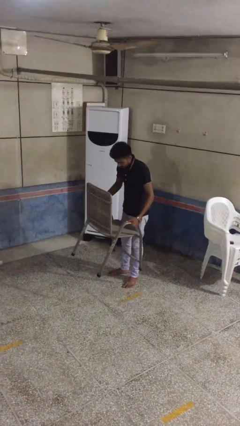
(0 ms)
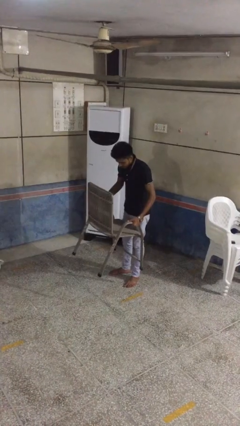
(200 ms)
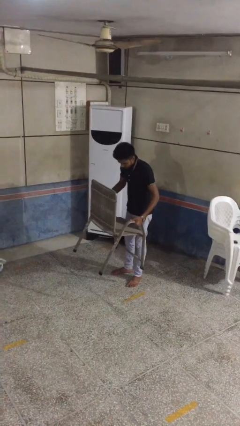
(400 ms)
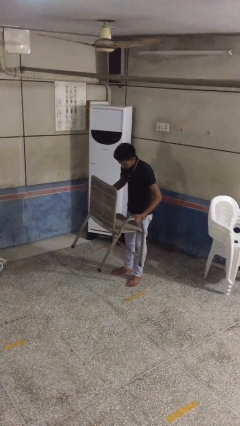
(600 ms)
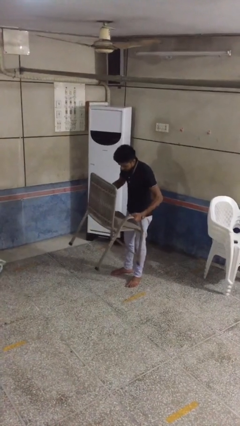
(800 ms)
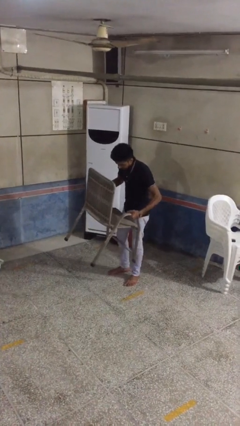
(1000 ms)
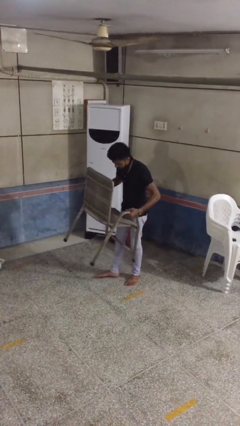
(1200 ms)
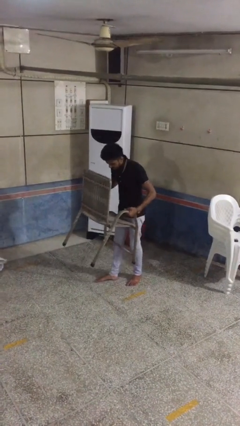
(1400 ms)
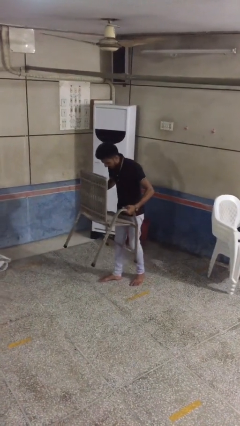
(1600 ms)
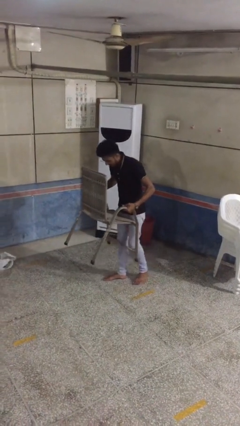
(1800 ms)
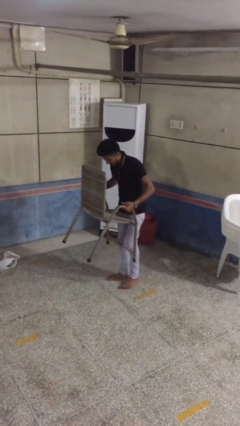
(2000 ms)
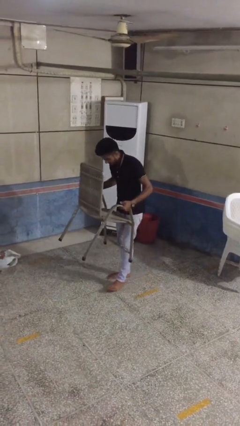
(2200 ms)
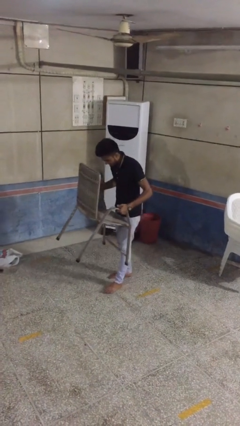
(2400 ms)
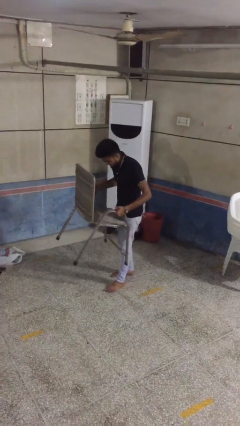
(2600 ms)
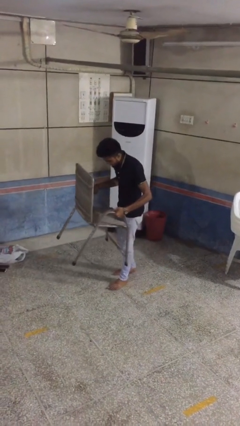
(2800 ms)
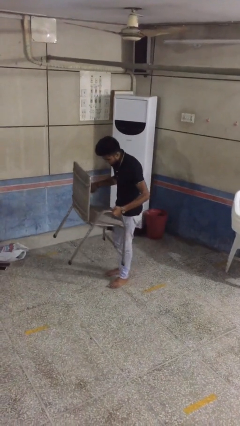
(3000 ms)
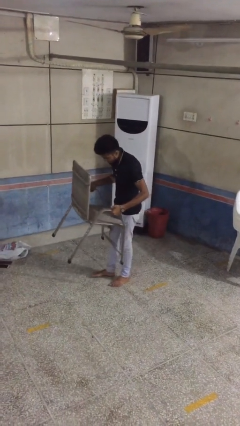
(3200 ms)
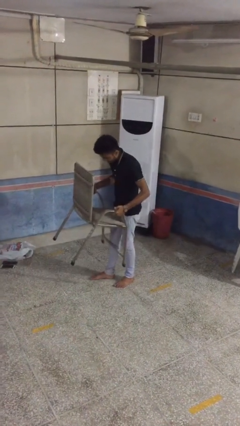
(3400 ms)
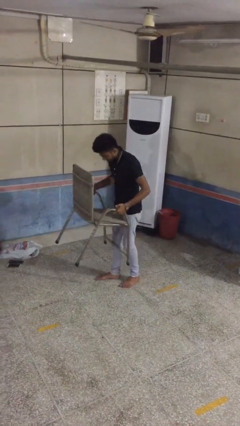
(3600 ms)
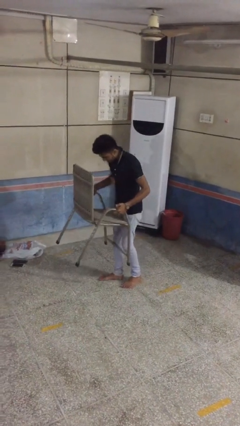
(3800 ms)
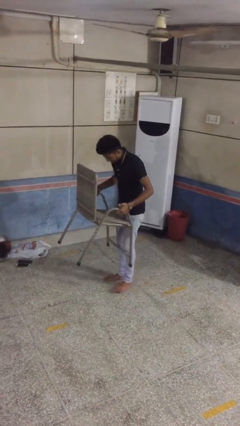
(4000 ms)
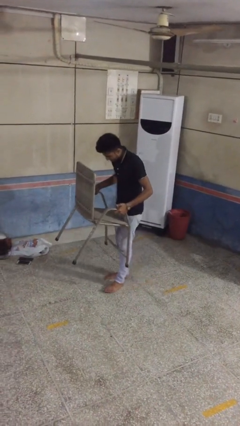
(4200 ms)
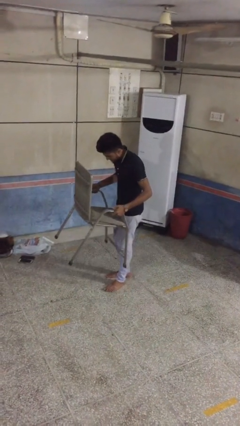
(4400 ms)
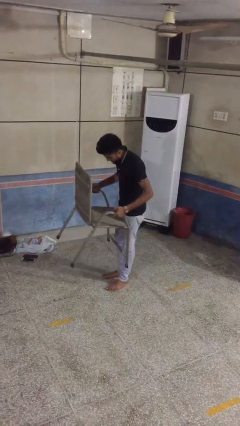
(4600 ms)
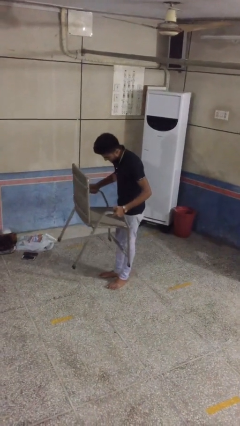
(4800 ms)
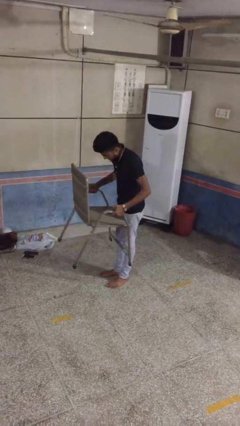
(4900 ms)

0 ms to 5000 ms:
person carries heavy object

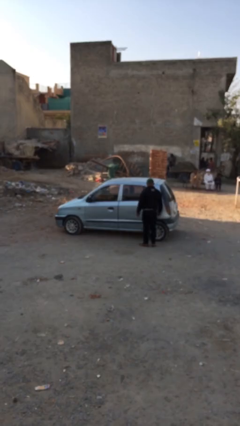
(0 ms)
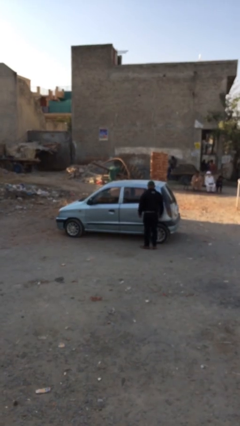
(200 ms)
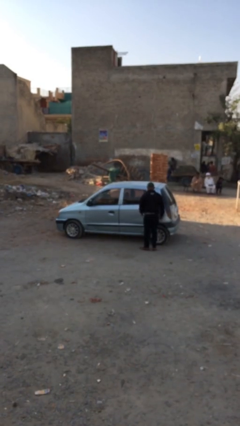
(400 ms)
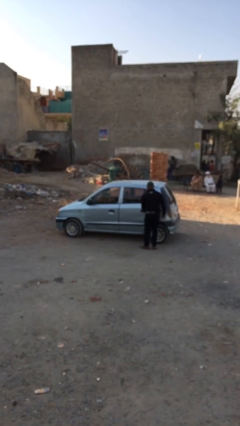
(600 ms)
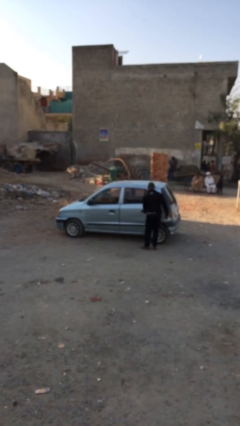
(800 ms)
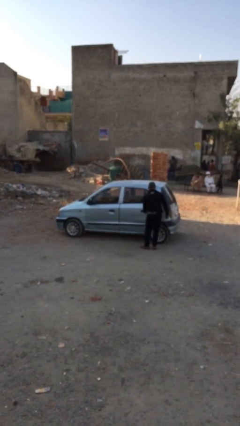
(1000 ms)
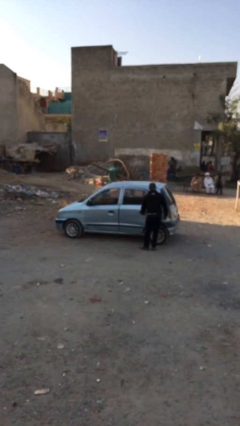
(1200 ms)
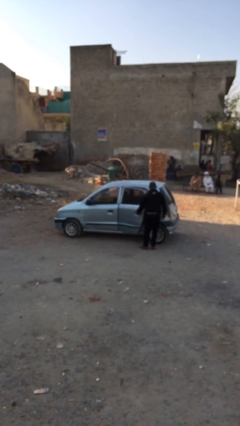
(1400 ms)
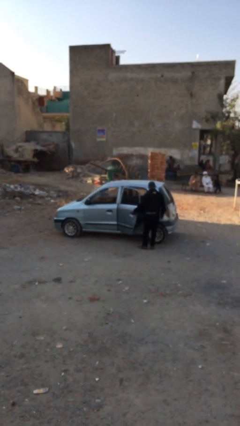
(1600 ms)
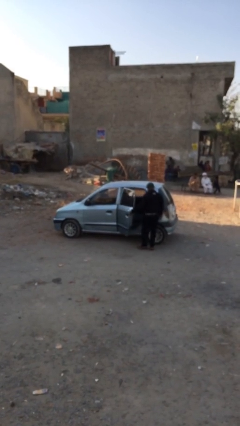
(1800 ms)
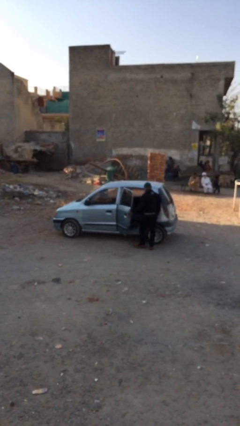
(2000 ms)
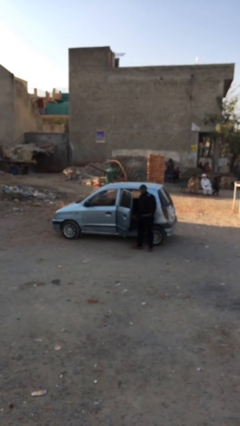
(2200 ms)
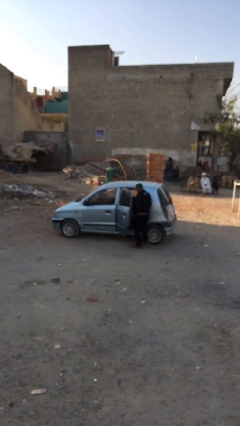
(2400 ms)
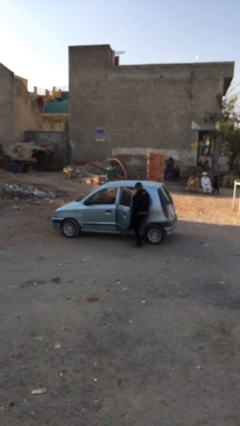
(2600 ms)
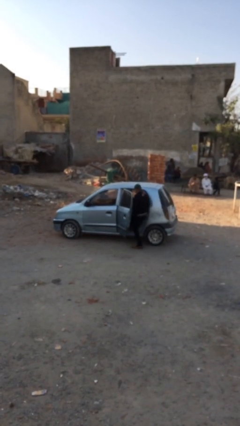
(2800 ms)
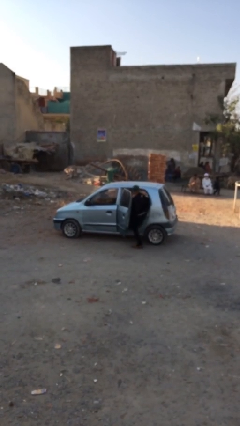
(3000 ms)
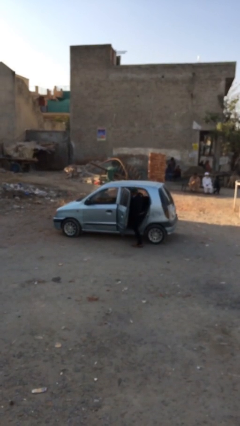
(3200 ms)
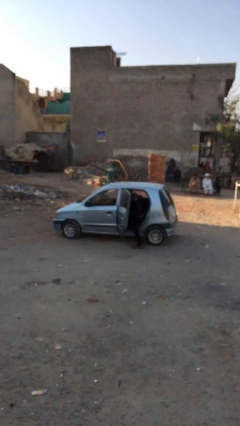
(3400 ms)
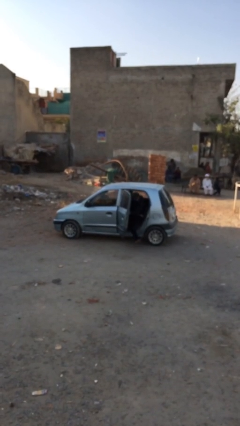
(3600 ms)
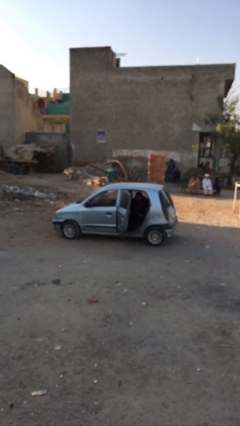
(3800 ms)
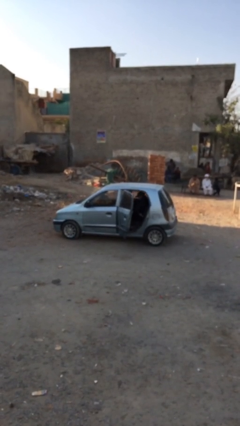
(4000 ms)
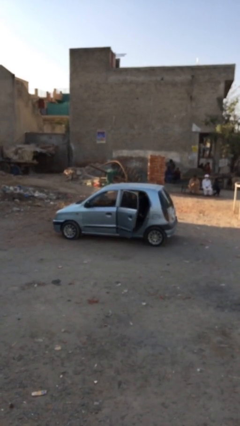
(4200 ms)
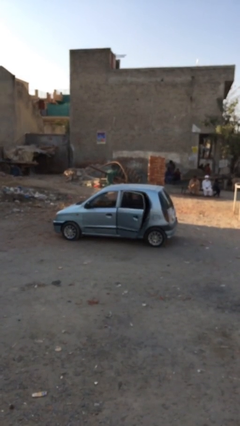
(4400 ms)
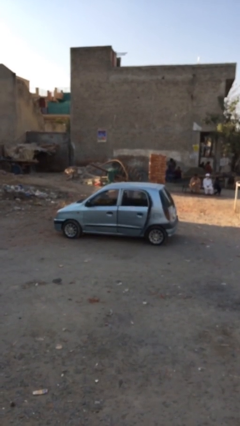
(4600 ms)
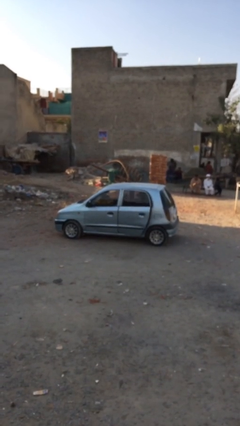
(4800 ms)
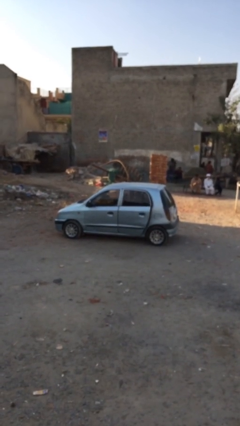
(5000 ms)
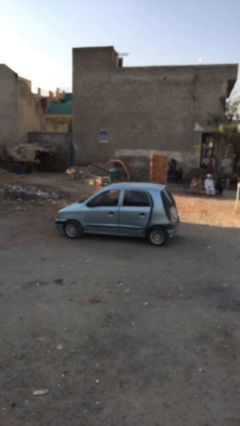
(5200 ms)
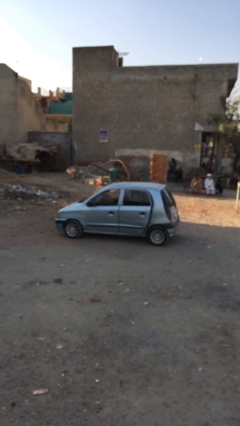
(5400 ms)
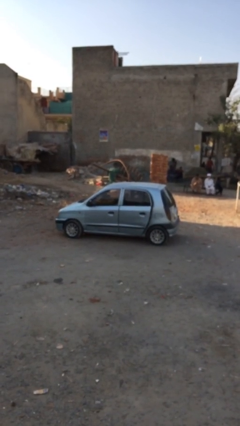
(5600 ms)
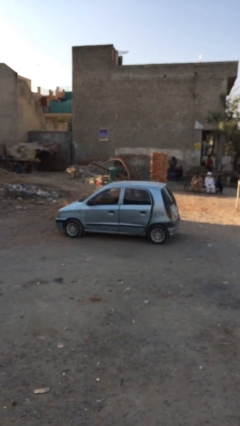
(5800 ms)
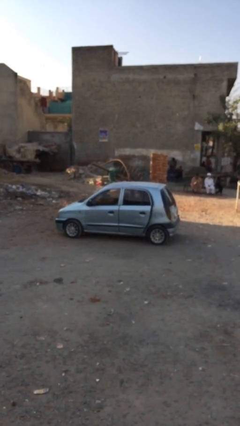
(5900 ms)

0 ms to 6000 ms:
car picks up person

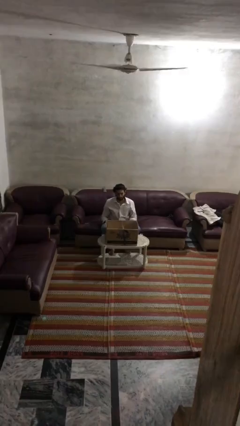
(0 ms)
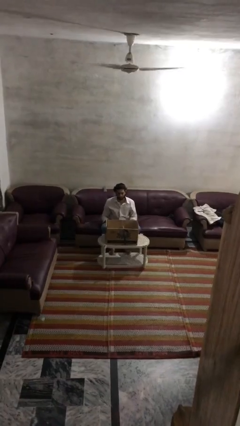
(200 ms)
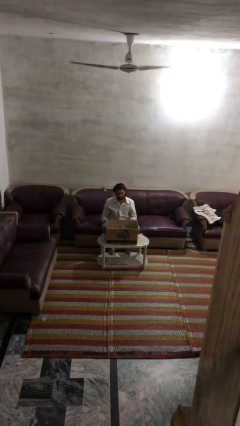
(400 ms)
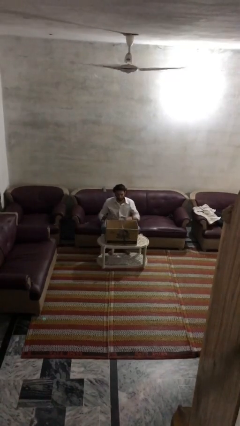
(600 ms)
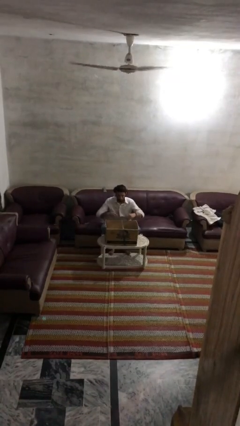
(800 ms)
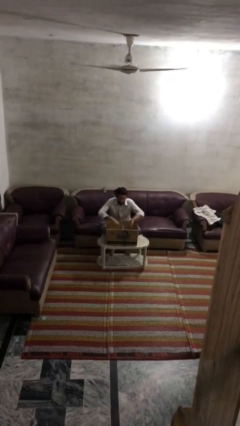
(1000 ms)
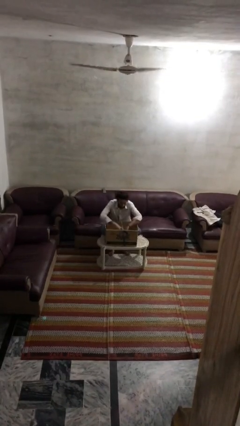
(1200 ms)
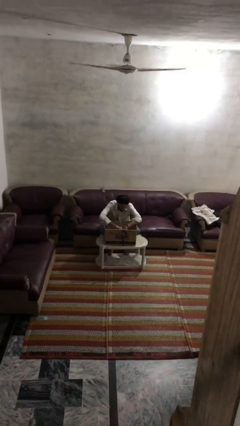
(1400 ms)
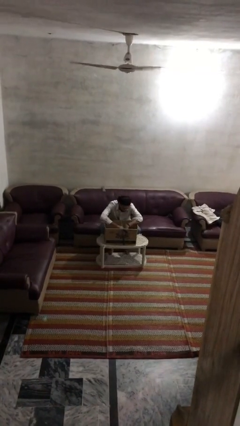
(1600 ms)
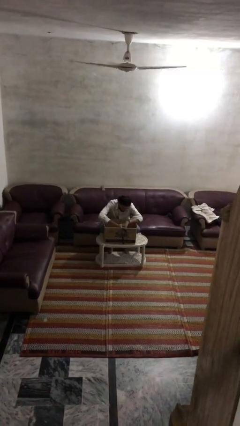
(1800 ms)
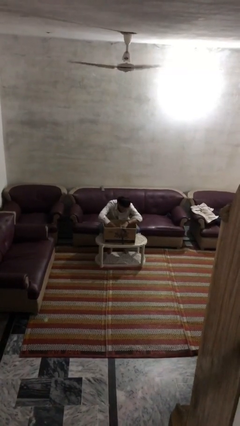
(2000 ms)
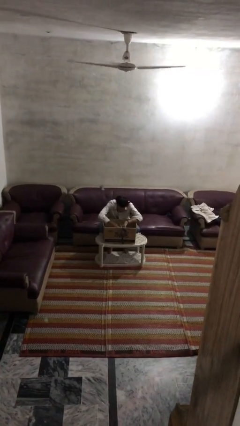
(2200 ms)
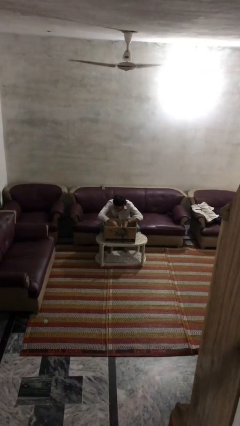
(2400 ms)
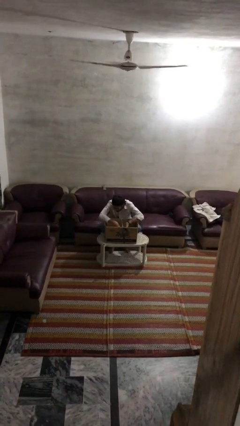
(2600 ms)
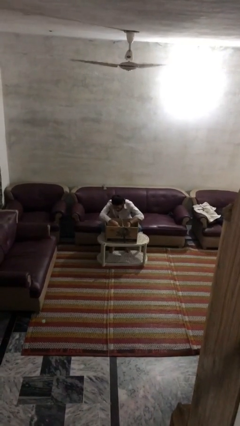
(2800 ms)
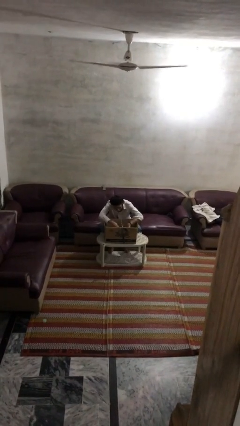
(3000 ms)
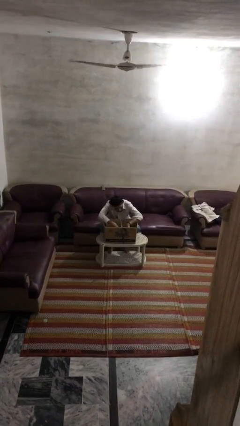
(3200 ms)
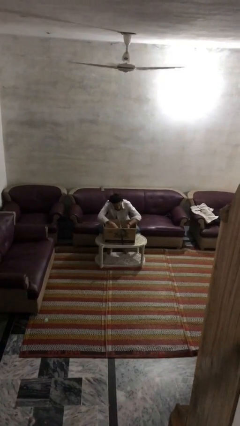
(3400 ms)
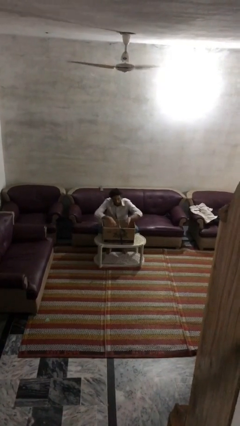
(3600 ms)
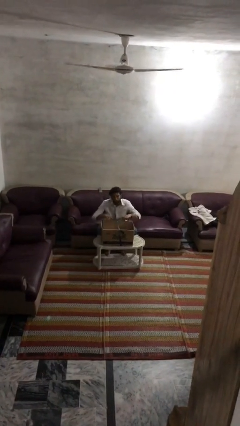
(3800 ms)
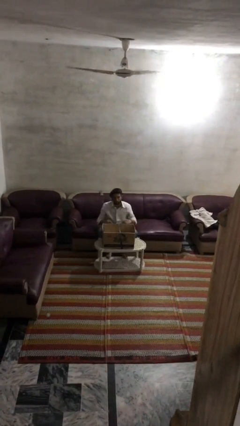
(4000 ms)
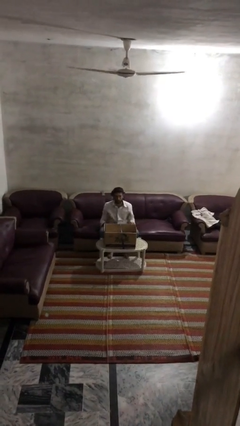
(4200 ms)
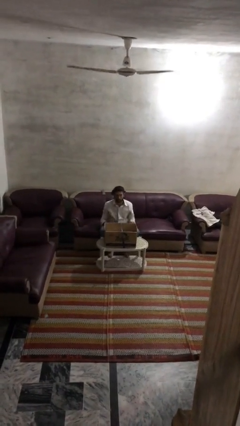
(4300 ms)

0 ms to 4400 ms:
person searches in box

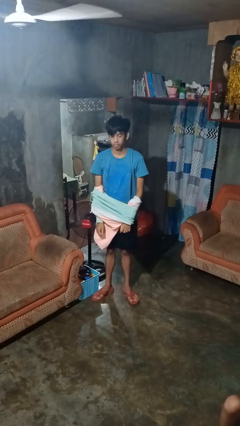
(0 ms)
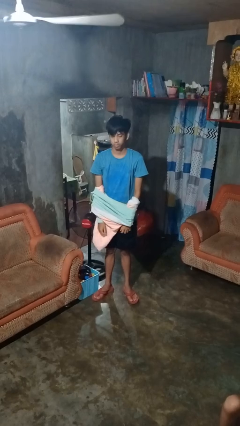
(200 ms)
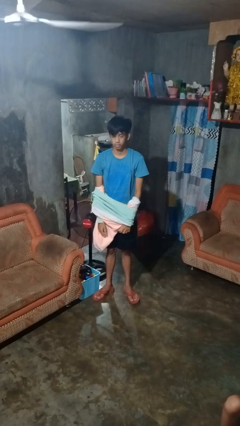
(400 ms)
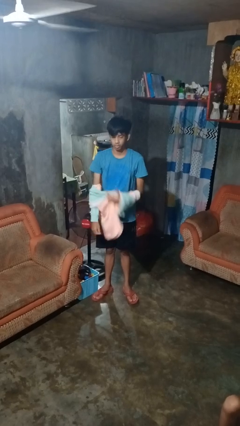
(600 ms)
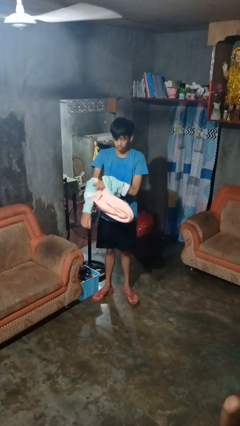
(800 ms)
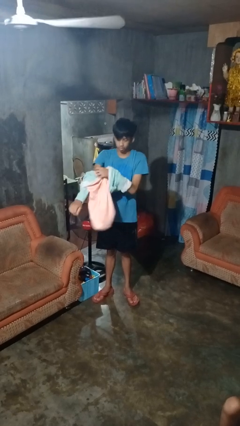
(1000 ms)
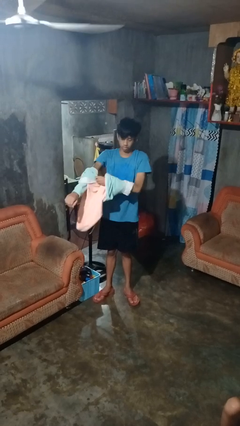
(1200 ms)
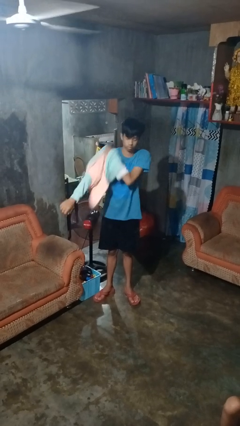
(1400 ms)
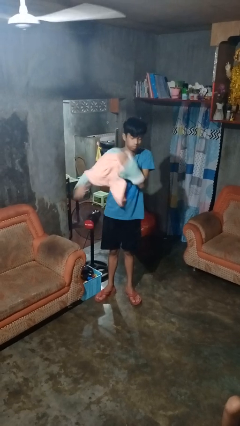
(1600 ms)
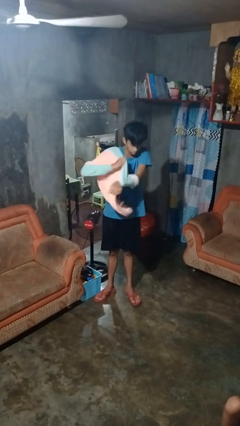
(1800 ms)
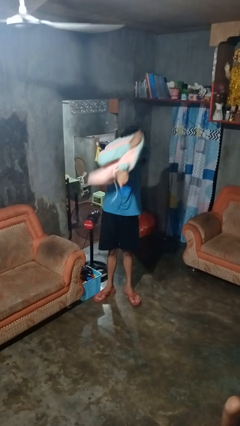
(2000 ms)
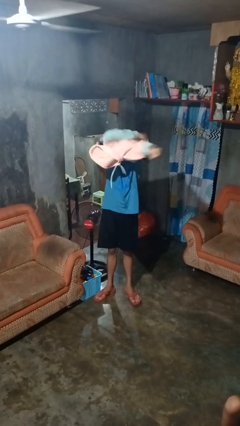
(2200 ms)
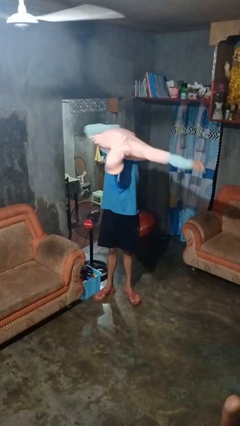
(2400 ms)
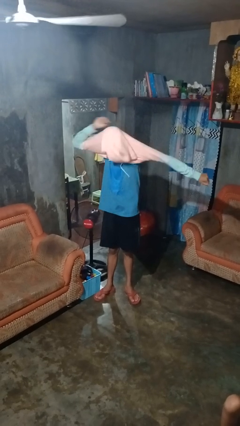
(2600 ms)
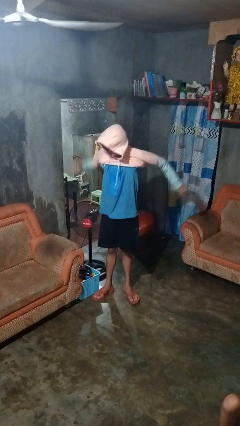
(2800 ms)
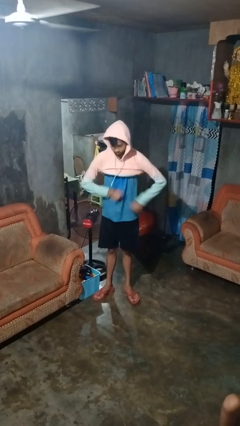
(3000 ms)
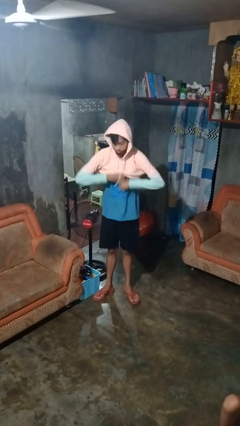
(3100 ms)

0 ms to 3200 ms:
person puts on hoodie
